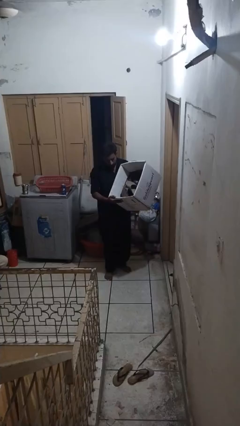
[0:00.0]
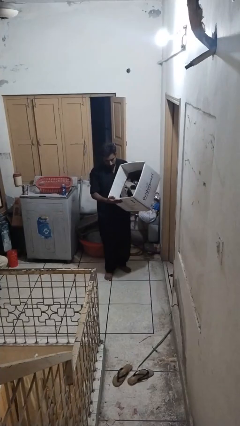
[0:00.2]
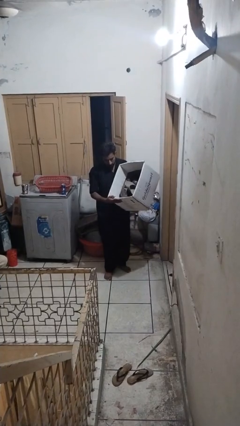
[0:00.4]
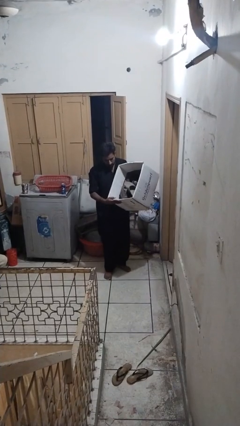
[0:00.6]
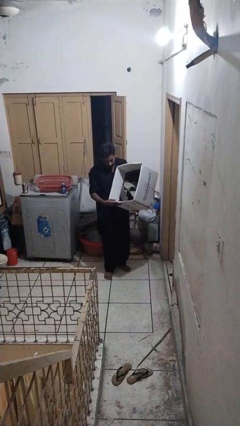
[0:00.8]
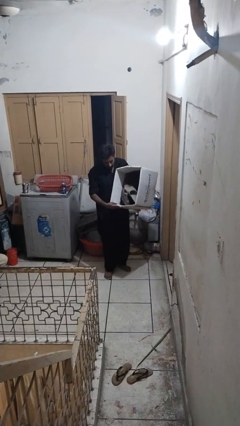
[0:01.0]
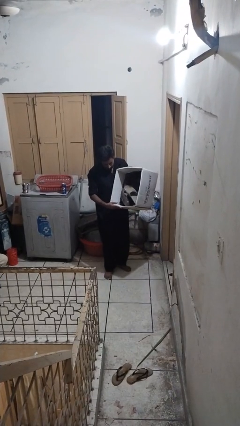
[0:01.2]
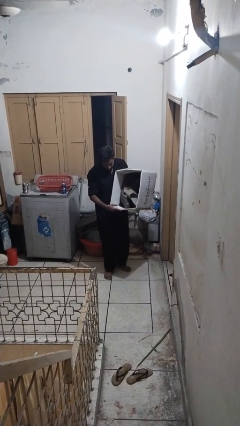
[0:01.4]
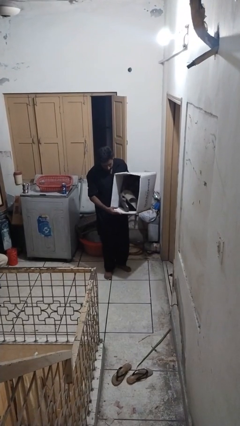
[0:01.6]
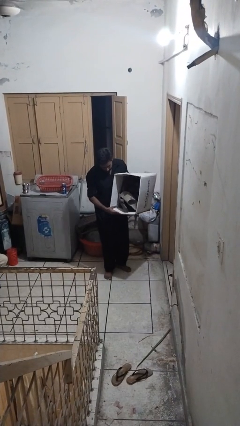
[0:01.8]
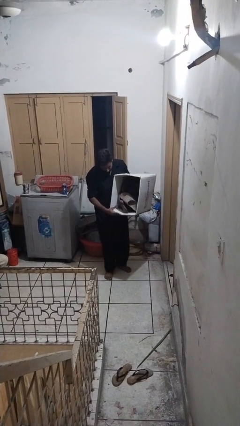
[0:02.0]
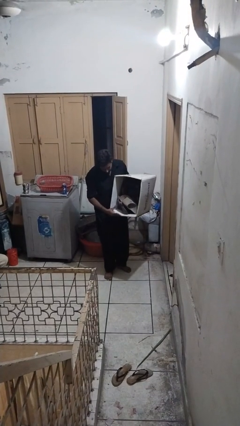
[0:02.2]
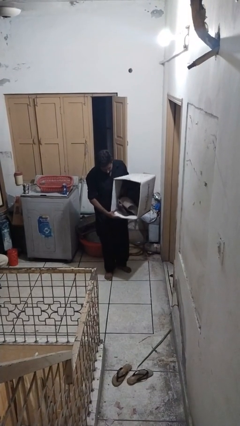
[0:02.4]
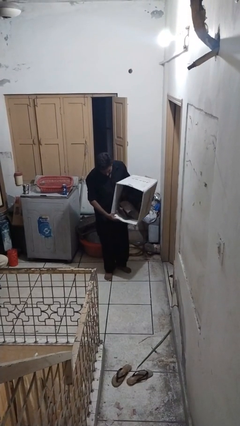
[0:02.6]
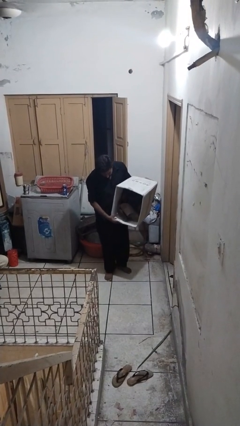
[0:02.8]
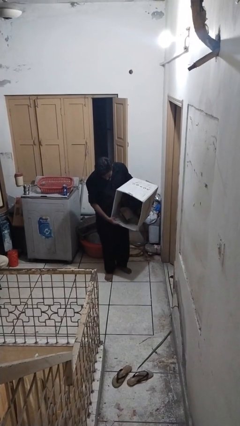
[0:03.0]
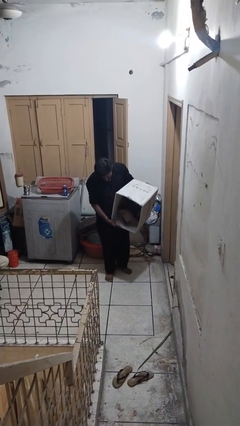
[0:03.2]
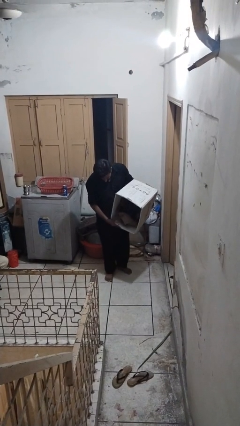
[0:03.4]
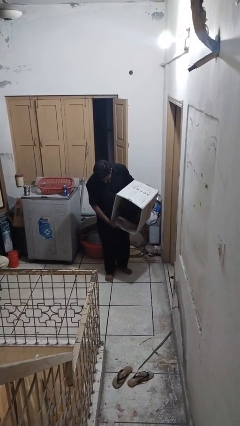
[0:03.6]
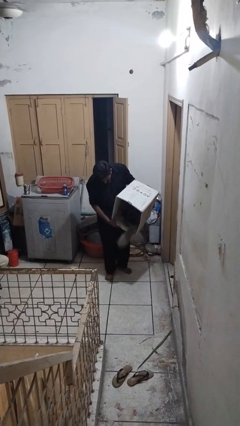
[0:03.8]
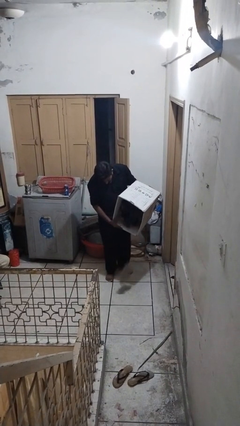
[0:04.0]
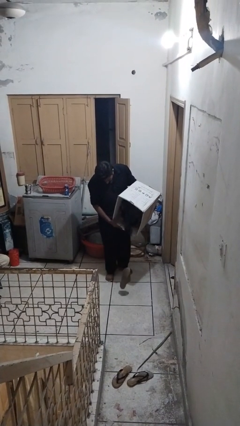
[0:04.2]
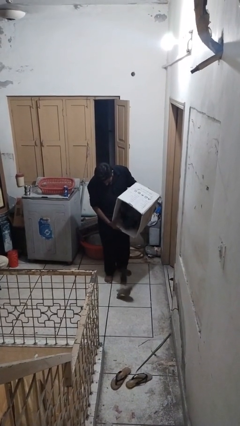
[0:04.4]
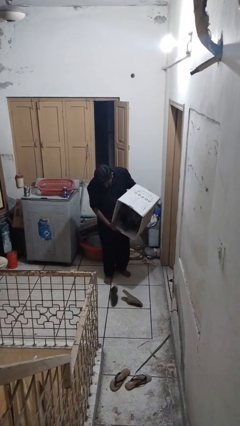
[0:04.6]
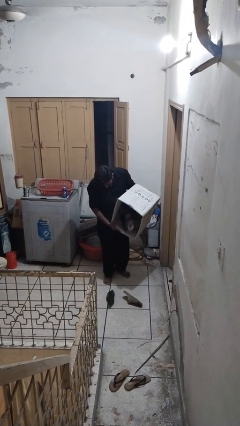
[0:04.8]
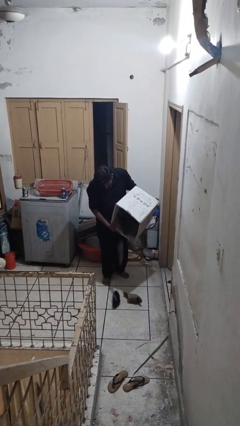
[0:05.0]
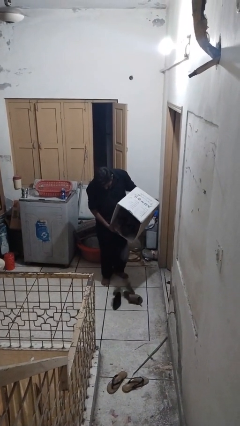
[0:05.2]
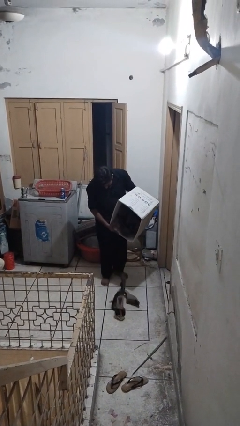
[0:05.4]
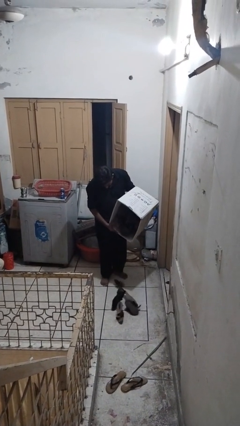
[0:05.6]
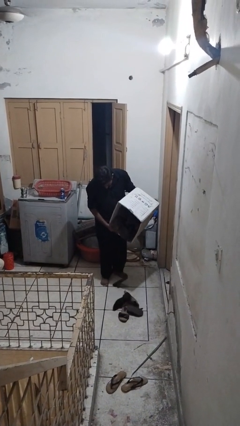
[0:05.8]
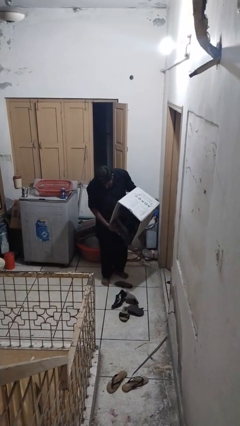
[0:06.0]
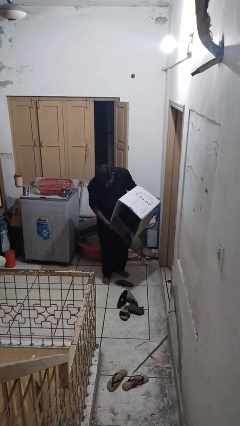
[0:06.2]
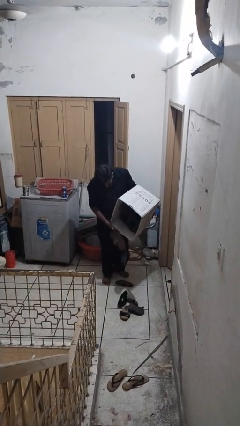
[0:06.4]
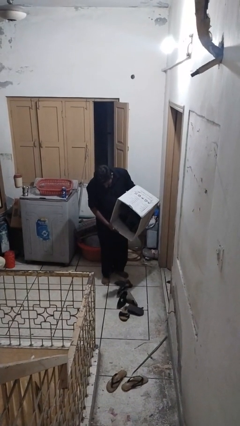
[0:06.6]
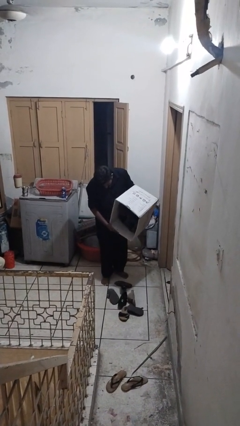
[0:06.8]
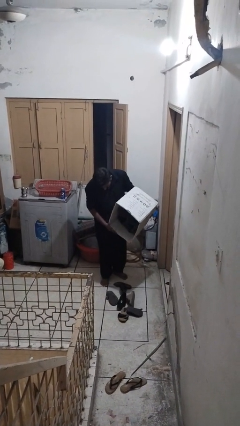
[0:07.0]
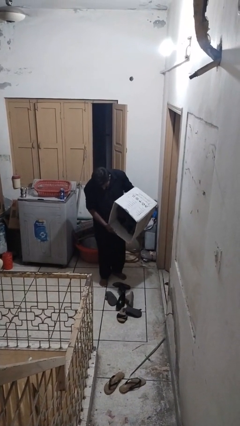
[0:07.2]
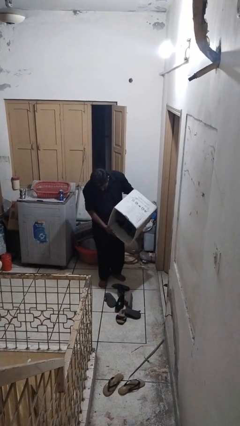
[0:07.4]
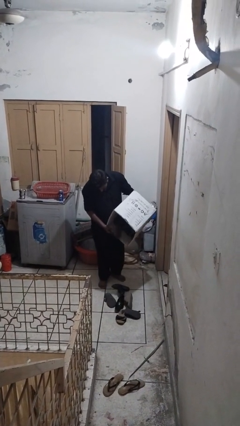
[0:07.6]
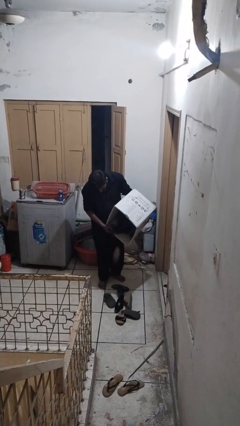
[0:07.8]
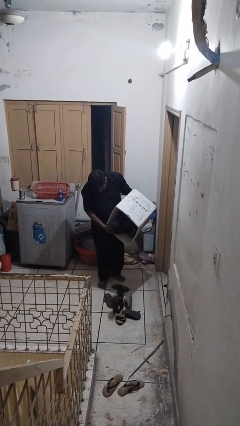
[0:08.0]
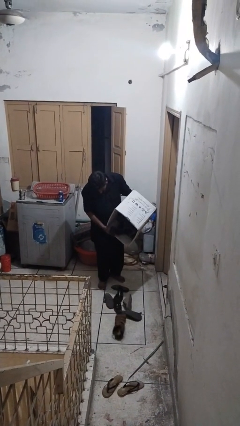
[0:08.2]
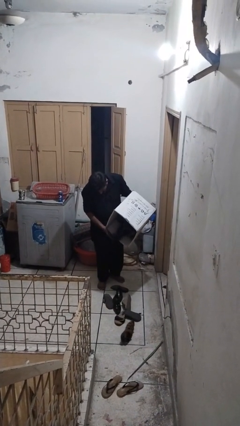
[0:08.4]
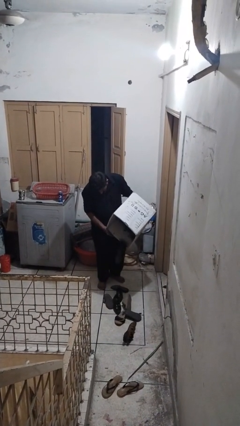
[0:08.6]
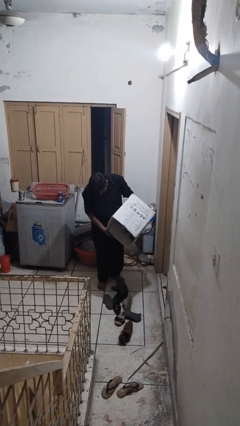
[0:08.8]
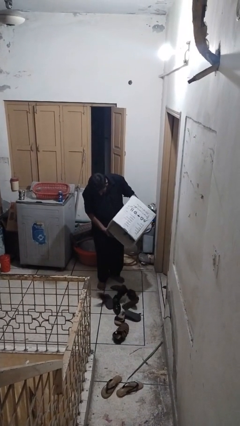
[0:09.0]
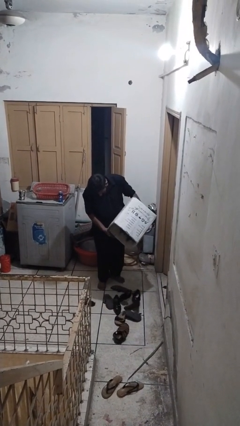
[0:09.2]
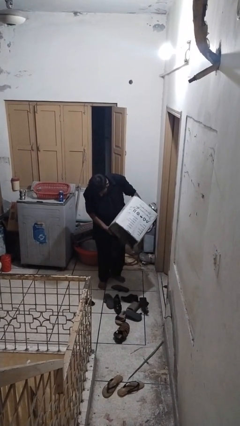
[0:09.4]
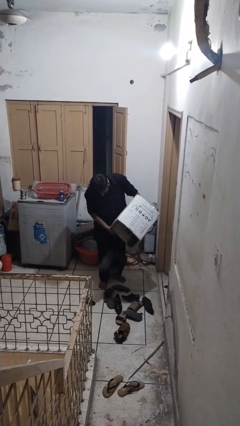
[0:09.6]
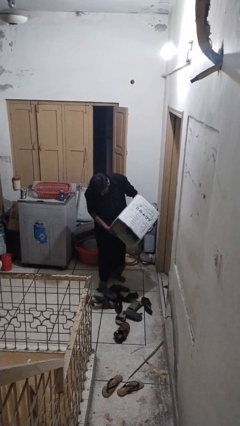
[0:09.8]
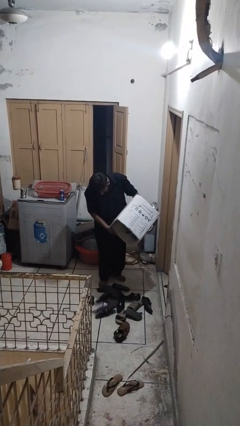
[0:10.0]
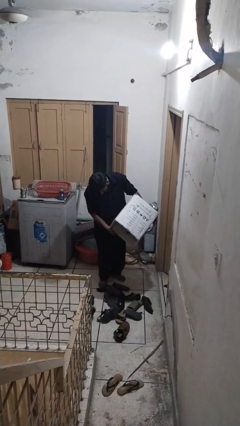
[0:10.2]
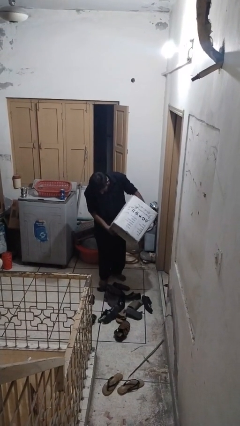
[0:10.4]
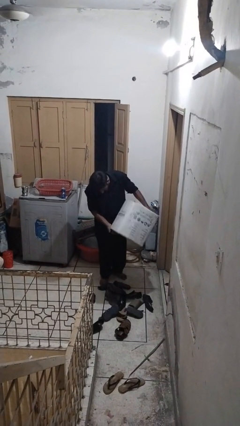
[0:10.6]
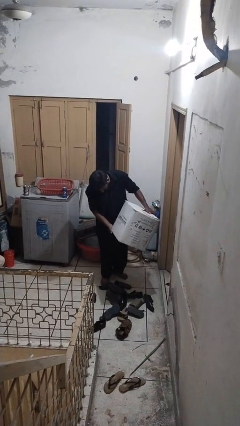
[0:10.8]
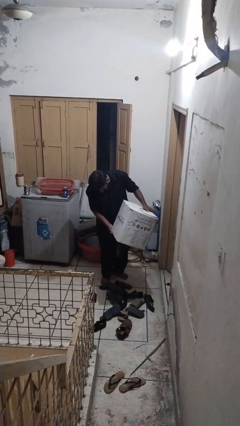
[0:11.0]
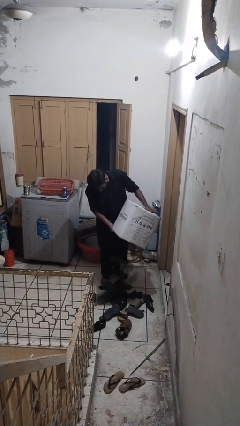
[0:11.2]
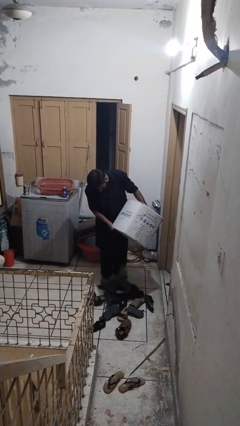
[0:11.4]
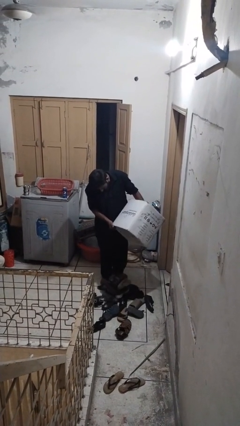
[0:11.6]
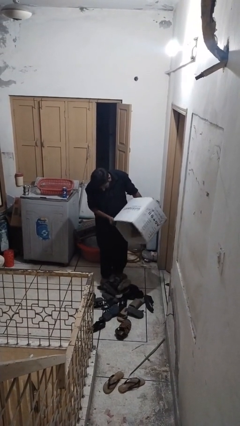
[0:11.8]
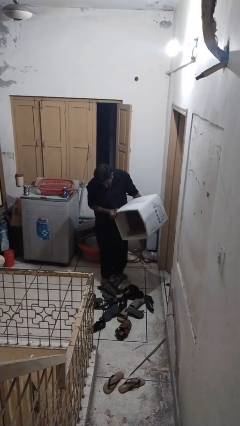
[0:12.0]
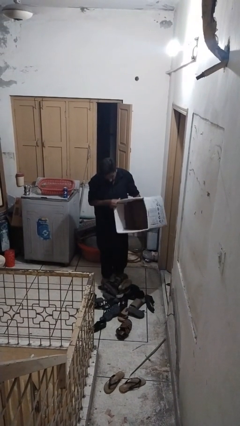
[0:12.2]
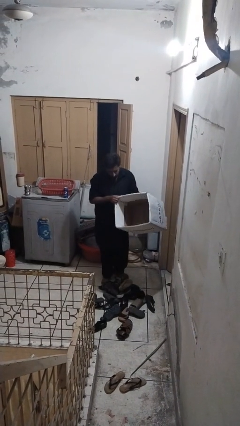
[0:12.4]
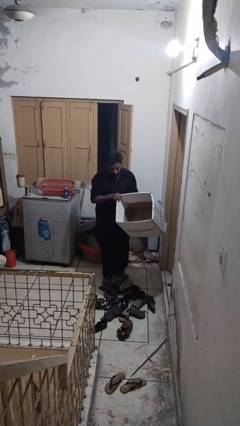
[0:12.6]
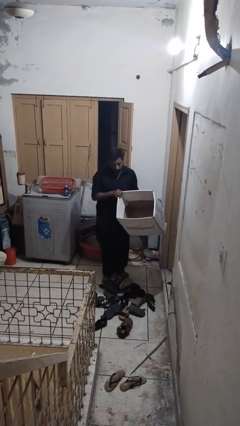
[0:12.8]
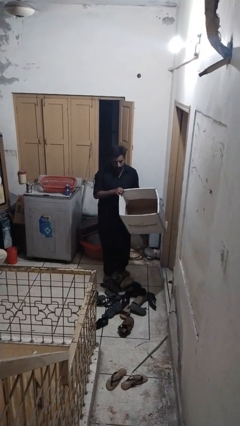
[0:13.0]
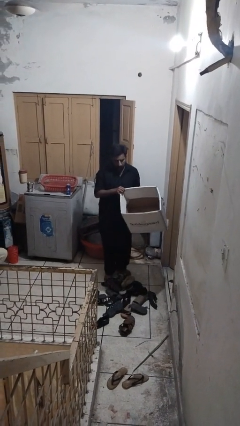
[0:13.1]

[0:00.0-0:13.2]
person unloads box onto floor

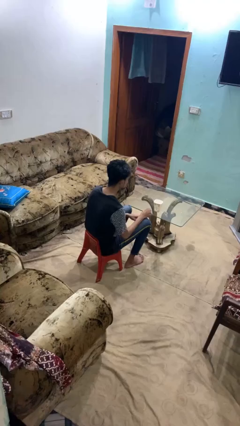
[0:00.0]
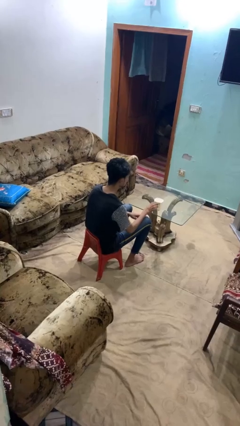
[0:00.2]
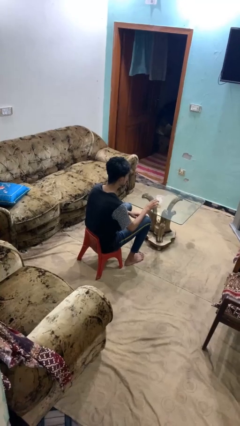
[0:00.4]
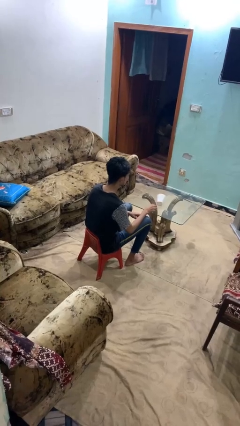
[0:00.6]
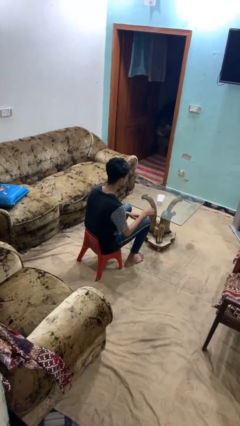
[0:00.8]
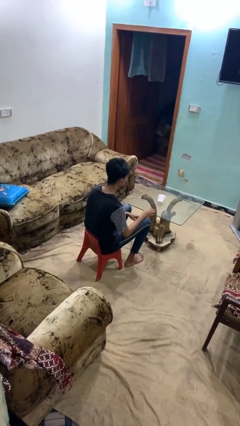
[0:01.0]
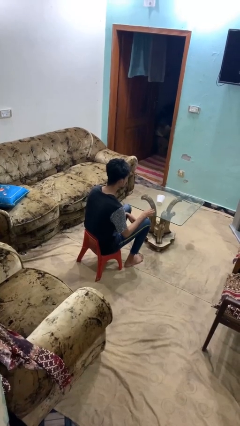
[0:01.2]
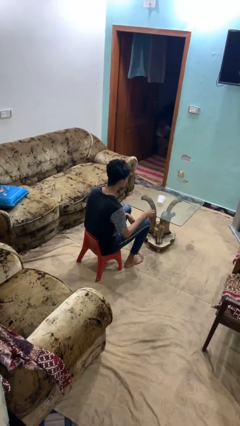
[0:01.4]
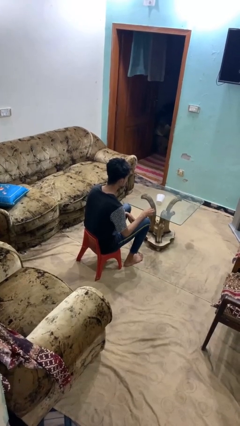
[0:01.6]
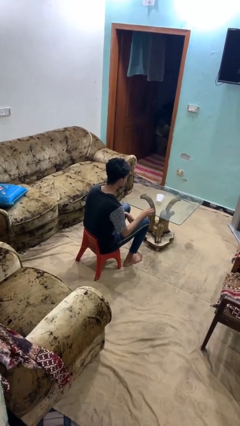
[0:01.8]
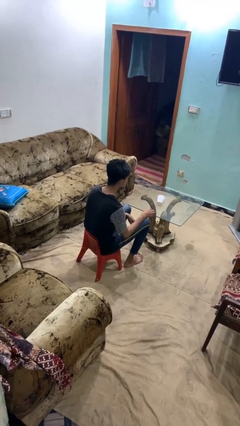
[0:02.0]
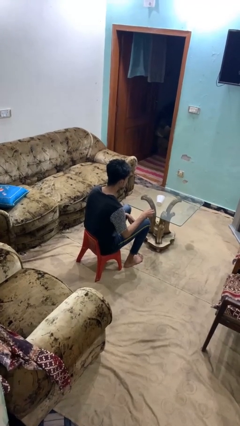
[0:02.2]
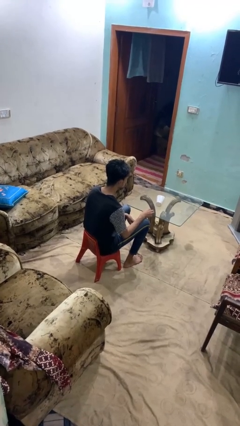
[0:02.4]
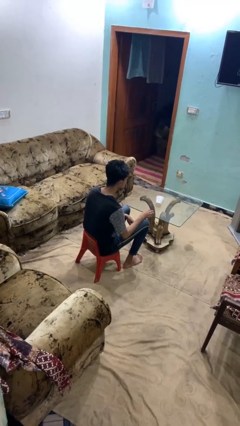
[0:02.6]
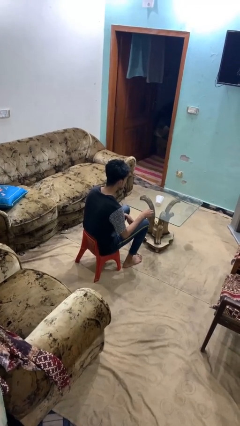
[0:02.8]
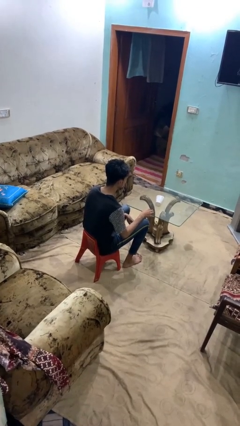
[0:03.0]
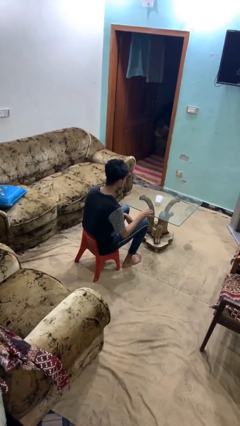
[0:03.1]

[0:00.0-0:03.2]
person knocks over glass

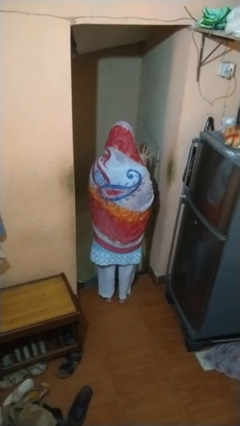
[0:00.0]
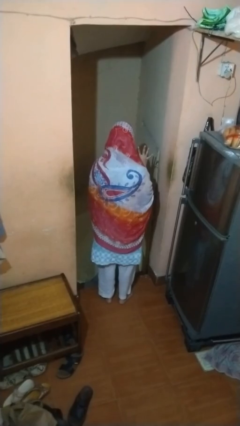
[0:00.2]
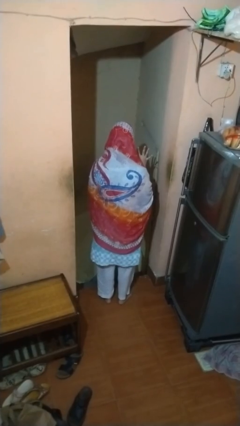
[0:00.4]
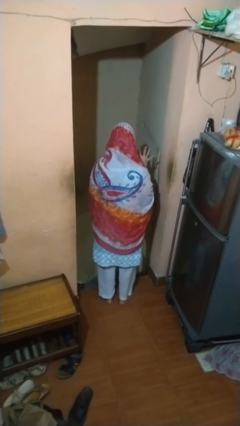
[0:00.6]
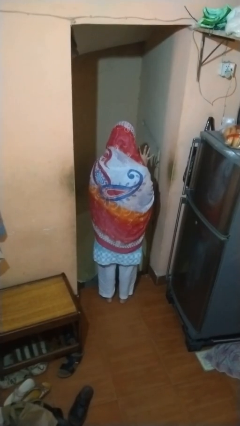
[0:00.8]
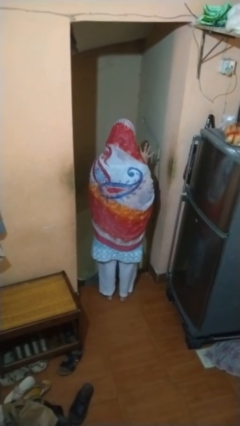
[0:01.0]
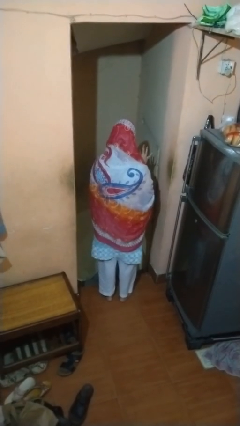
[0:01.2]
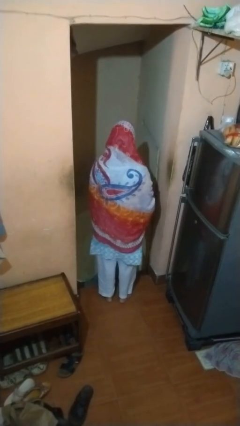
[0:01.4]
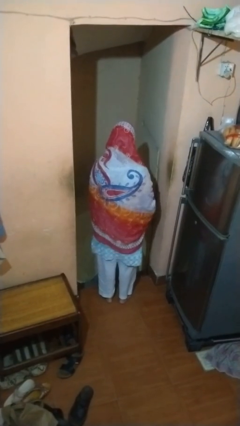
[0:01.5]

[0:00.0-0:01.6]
person gestures number four
